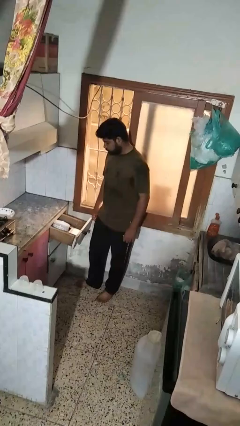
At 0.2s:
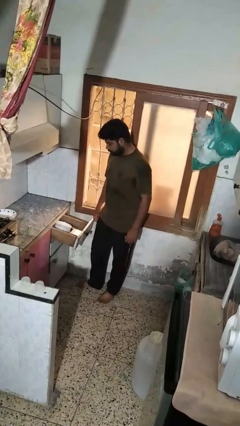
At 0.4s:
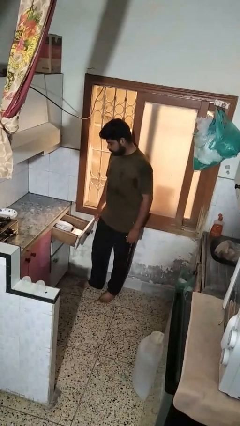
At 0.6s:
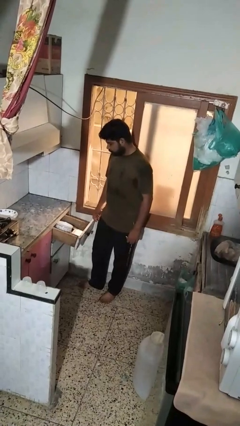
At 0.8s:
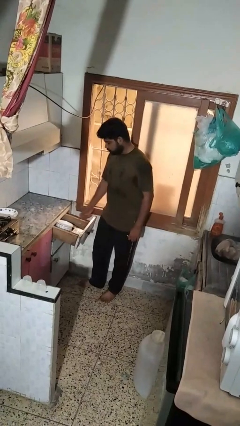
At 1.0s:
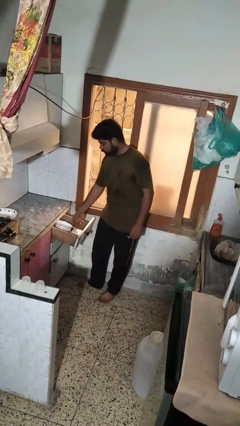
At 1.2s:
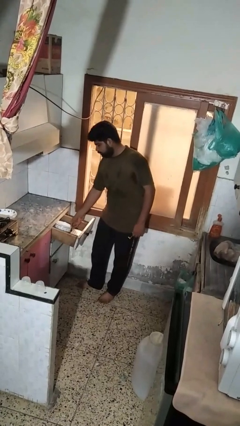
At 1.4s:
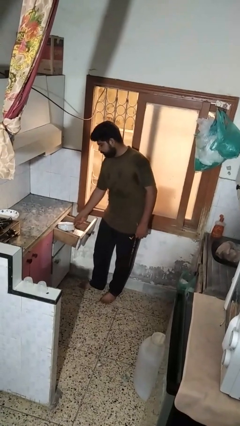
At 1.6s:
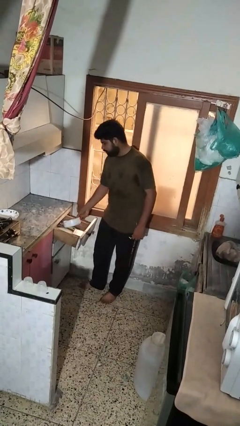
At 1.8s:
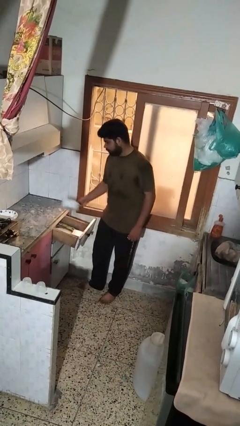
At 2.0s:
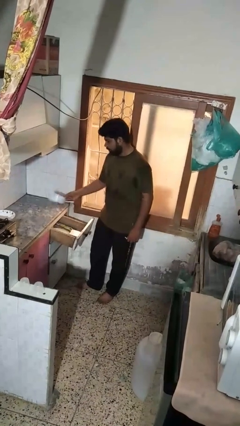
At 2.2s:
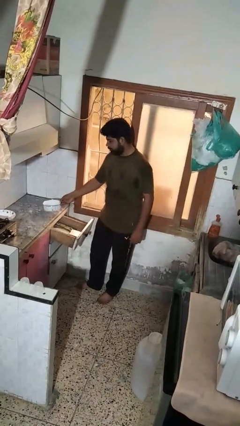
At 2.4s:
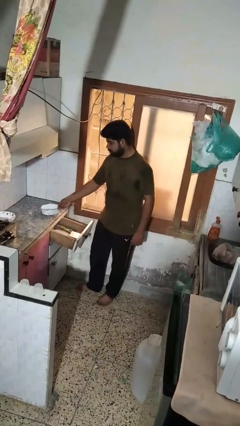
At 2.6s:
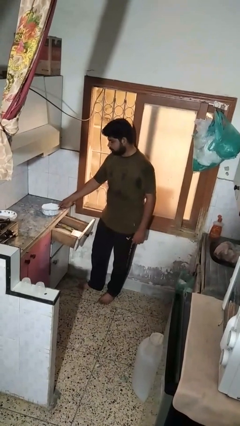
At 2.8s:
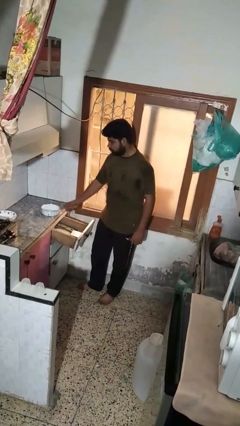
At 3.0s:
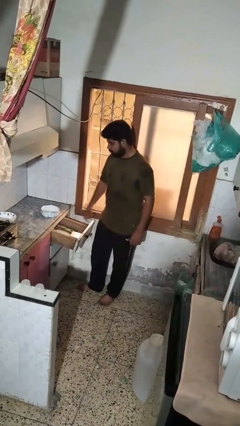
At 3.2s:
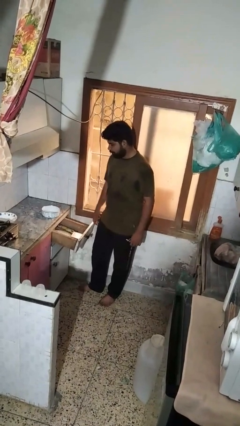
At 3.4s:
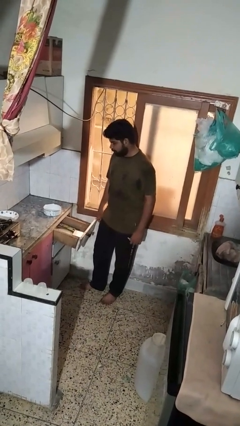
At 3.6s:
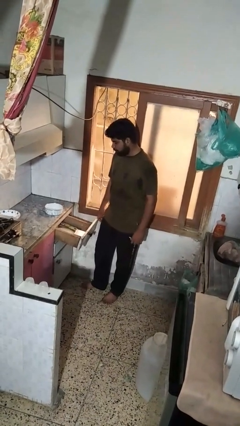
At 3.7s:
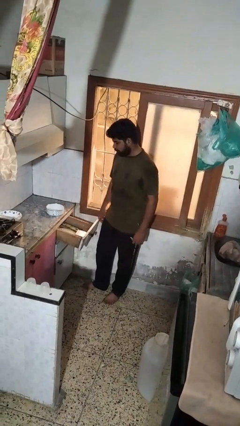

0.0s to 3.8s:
person takes object from kitchen drawer

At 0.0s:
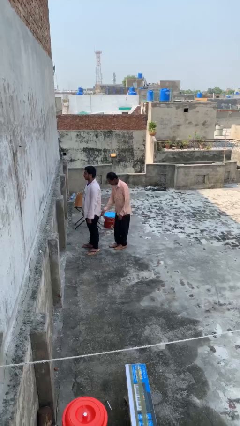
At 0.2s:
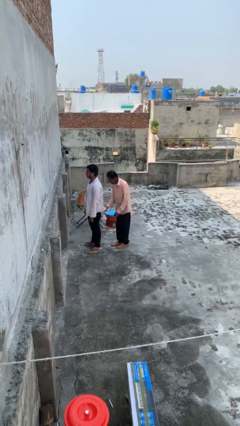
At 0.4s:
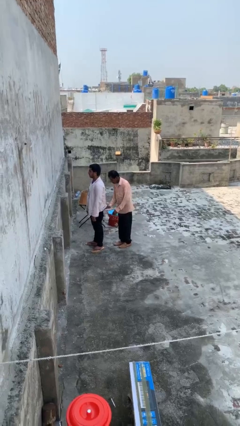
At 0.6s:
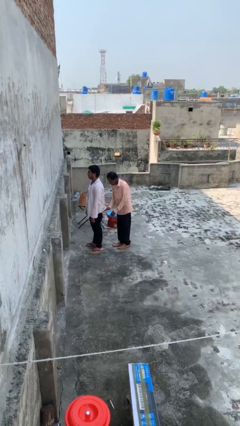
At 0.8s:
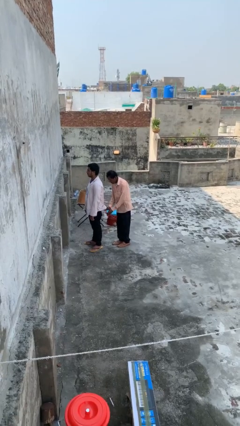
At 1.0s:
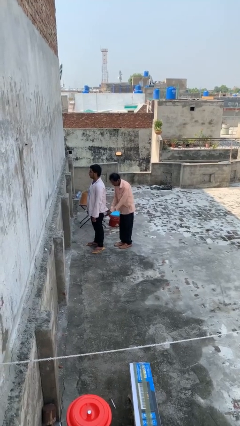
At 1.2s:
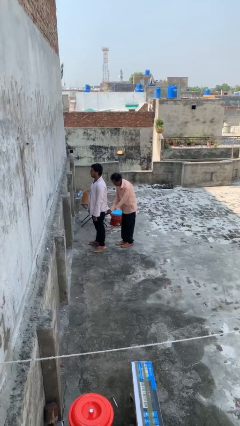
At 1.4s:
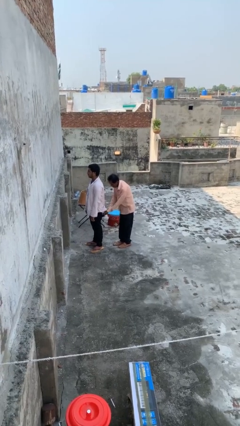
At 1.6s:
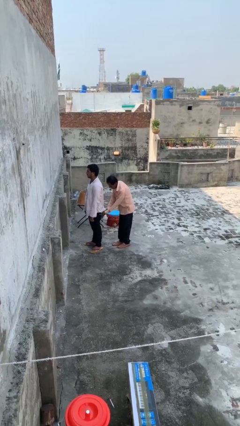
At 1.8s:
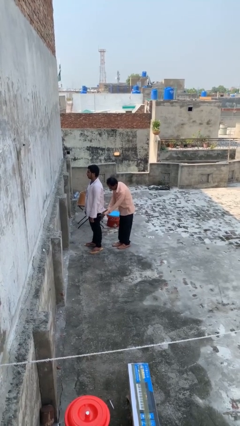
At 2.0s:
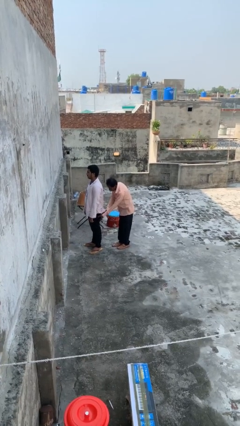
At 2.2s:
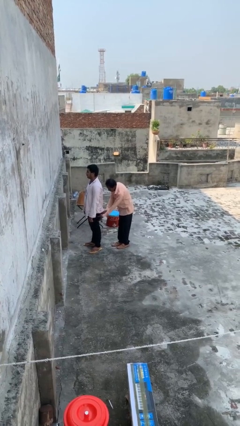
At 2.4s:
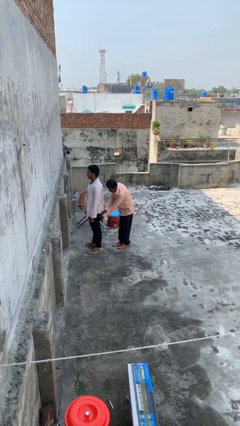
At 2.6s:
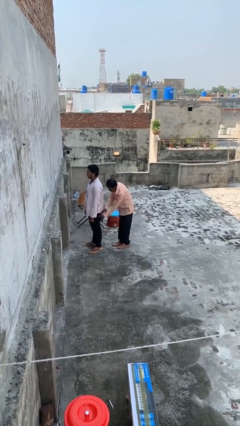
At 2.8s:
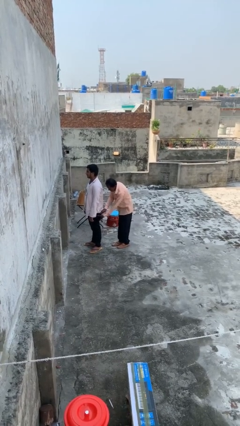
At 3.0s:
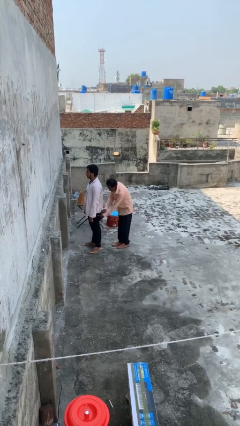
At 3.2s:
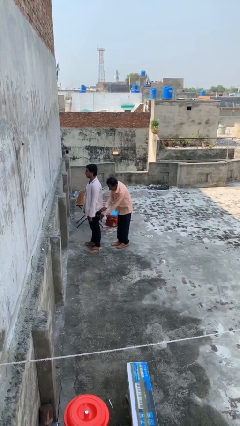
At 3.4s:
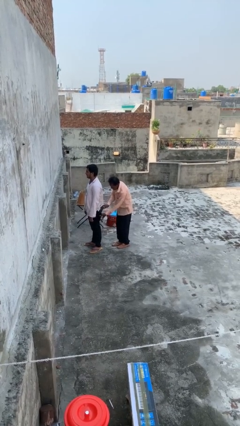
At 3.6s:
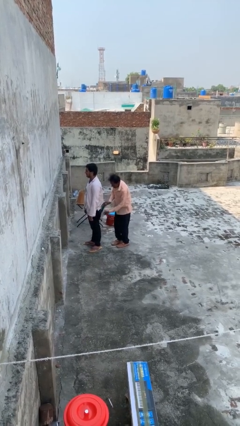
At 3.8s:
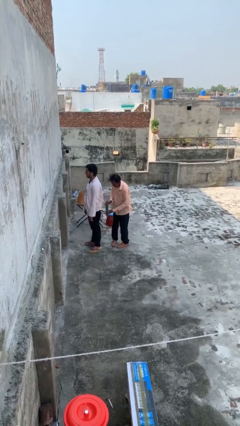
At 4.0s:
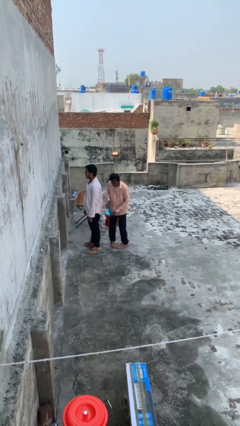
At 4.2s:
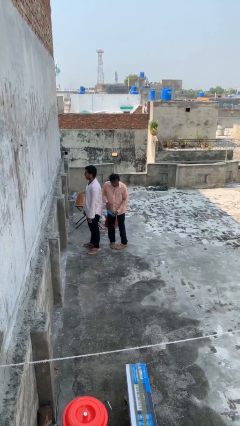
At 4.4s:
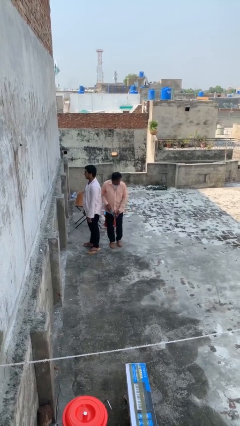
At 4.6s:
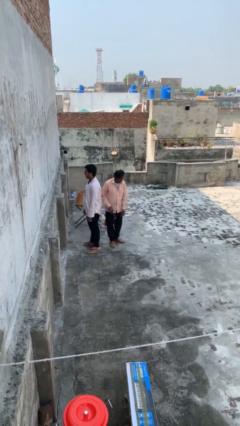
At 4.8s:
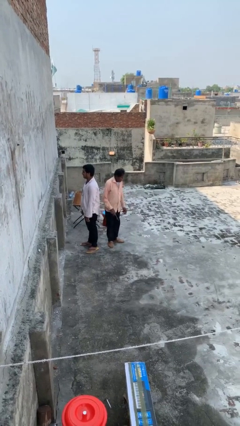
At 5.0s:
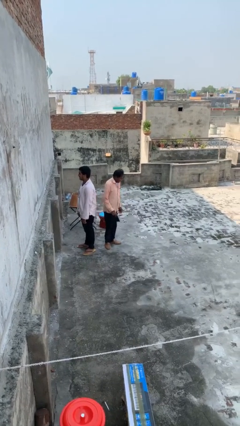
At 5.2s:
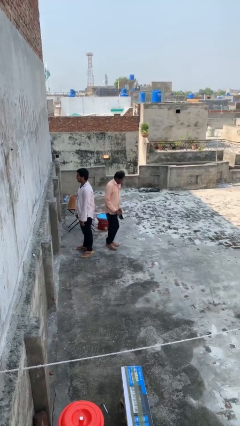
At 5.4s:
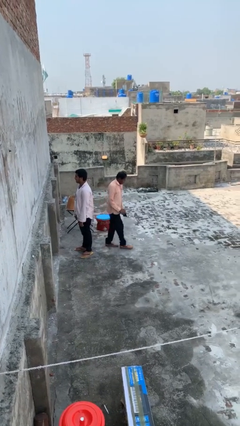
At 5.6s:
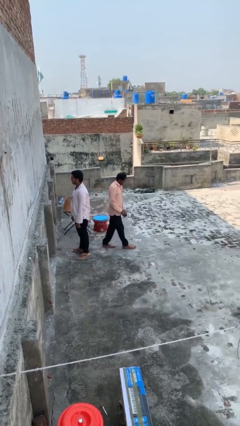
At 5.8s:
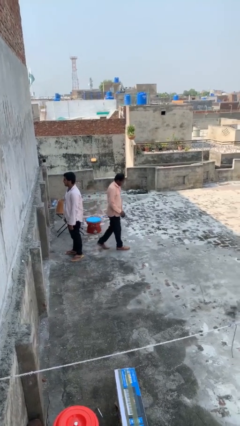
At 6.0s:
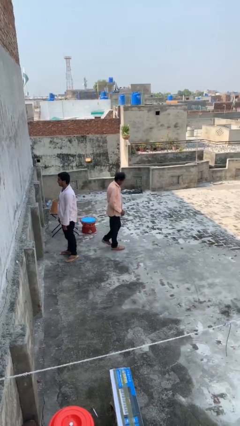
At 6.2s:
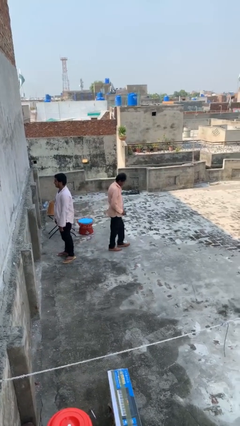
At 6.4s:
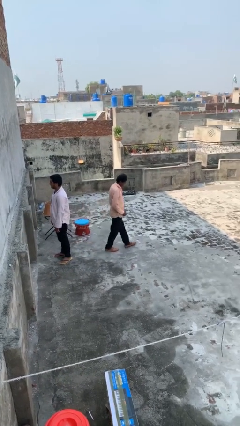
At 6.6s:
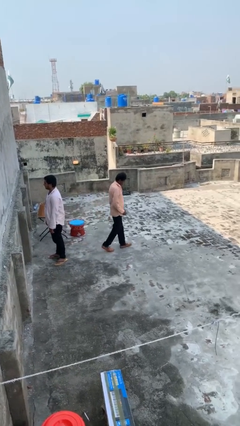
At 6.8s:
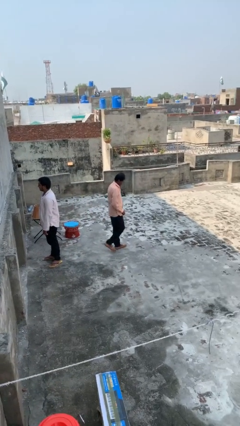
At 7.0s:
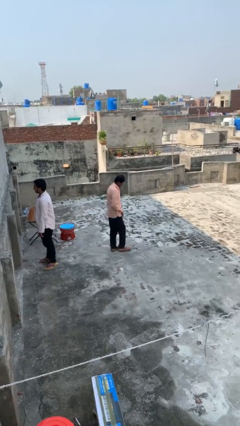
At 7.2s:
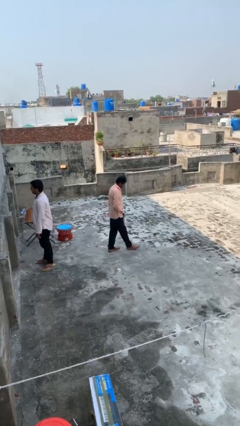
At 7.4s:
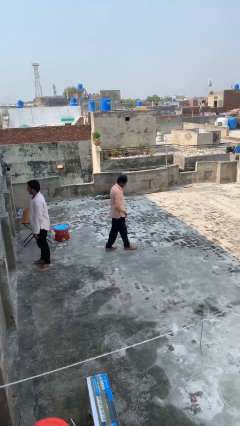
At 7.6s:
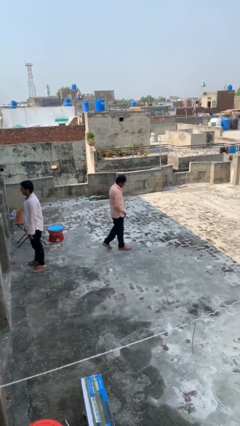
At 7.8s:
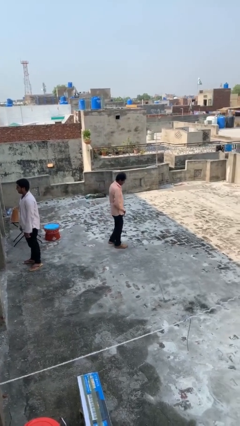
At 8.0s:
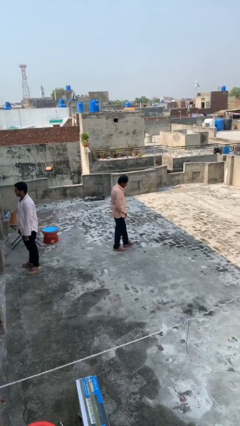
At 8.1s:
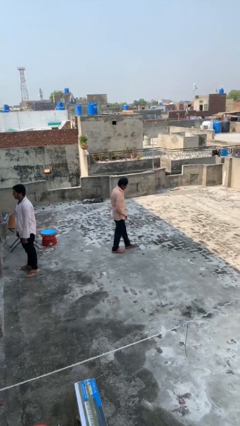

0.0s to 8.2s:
person steals object from person

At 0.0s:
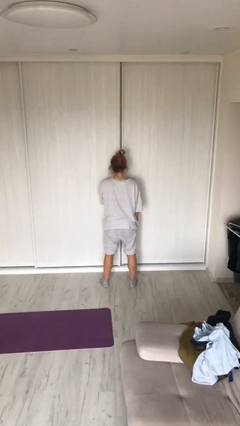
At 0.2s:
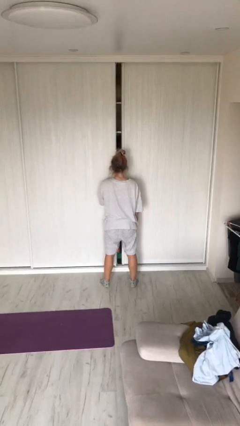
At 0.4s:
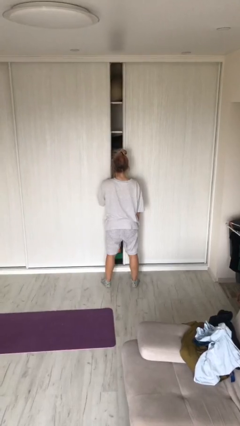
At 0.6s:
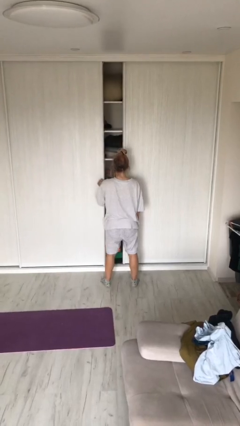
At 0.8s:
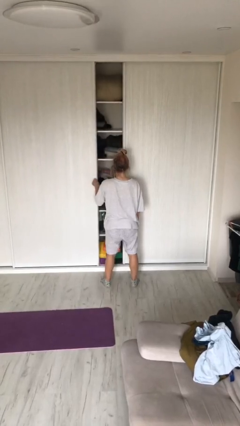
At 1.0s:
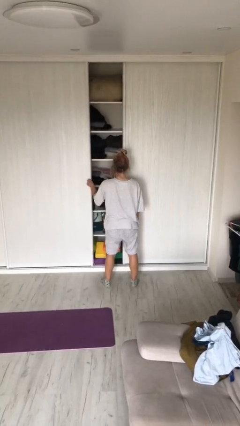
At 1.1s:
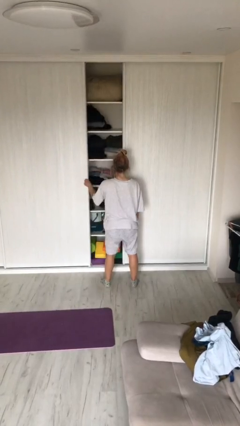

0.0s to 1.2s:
person opens sliding door

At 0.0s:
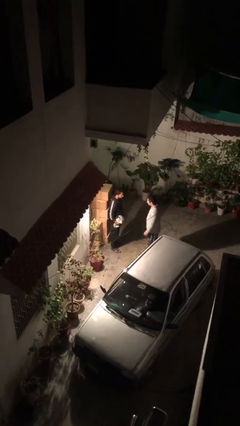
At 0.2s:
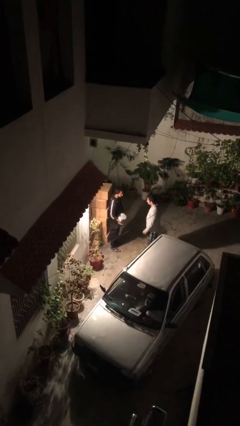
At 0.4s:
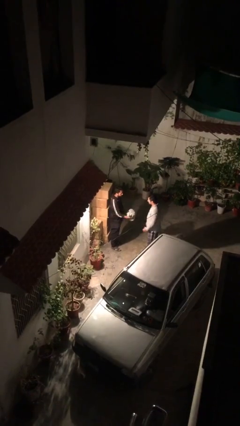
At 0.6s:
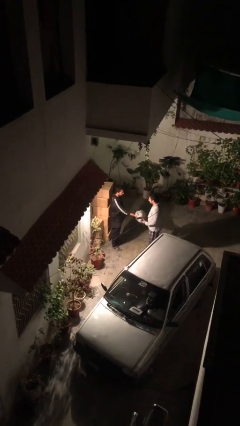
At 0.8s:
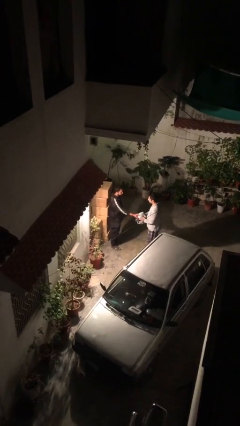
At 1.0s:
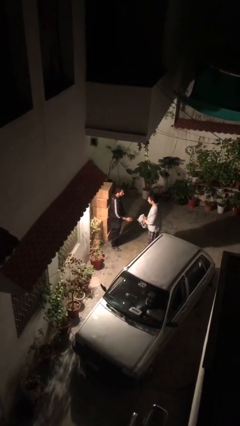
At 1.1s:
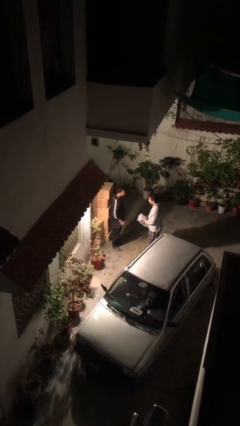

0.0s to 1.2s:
person transfers object to person

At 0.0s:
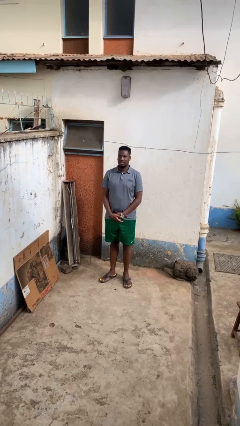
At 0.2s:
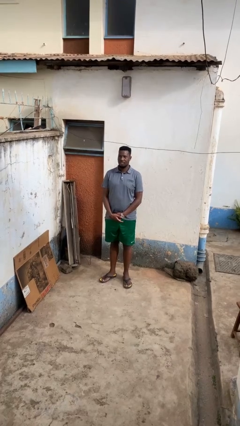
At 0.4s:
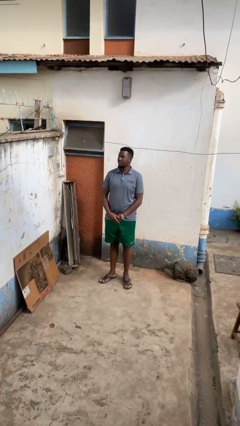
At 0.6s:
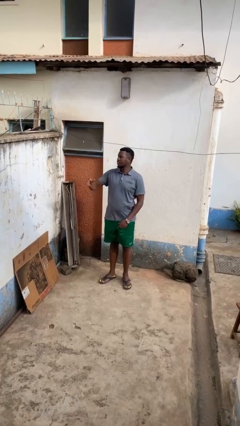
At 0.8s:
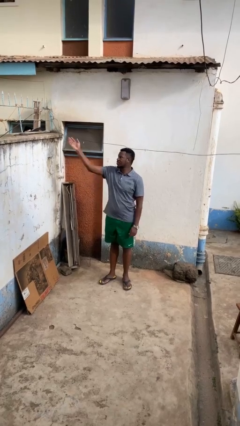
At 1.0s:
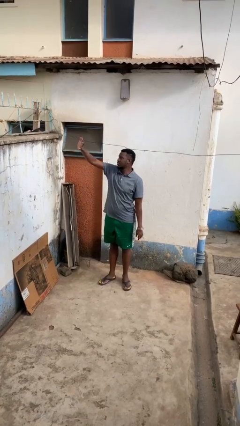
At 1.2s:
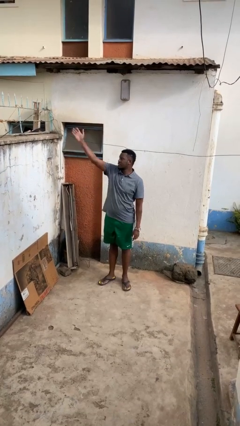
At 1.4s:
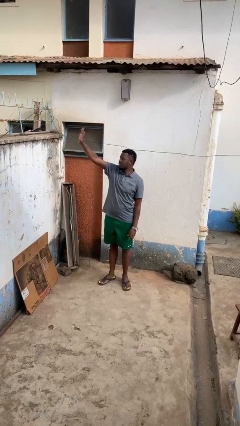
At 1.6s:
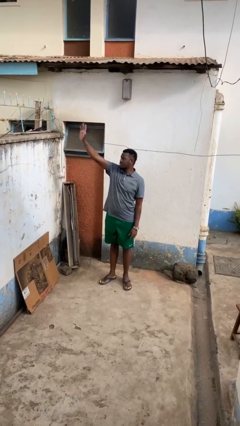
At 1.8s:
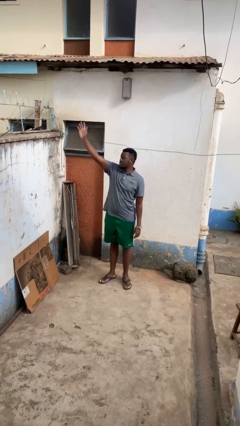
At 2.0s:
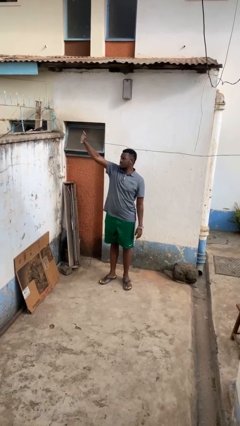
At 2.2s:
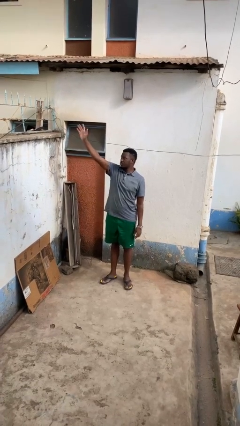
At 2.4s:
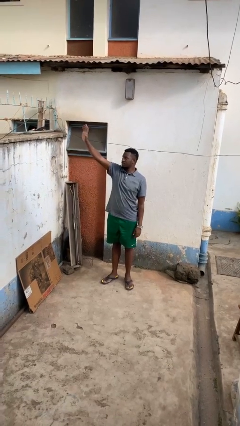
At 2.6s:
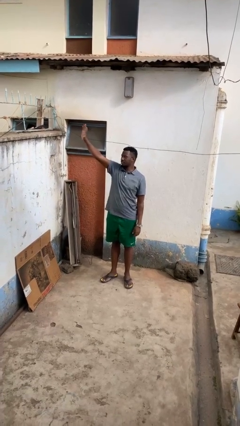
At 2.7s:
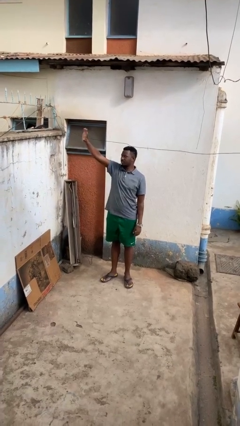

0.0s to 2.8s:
person waves at person

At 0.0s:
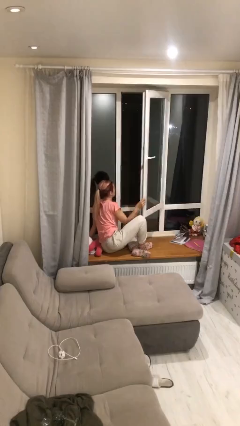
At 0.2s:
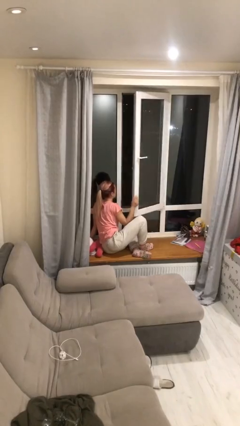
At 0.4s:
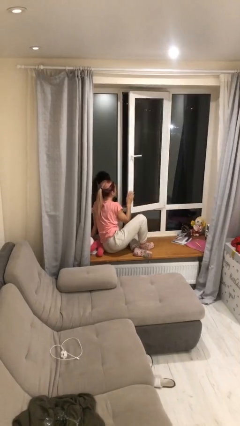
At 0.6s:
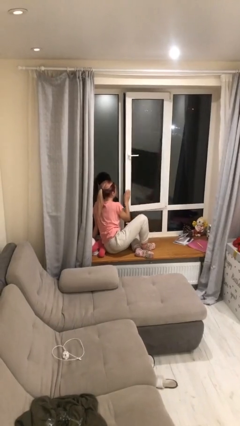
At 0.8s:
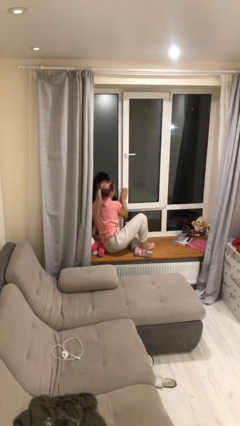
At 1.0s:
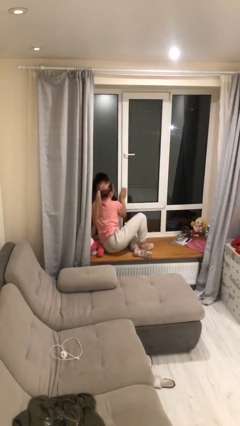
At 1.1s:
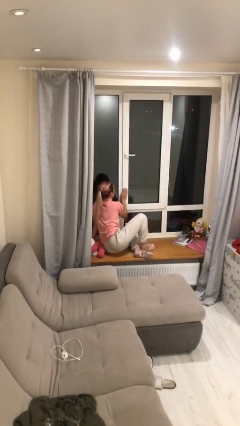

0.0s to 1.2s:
person closes home window
